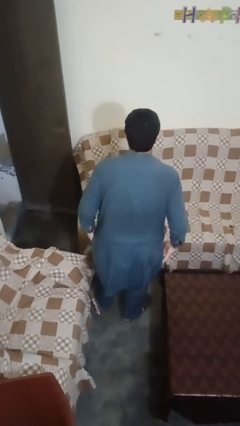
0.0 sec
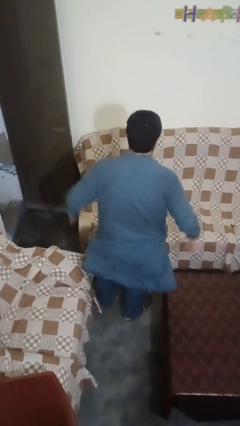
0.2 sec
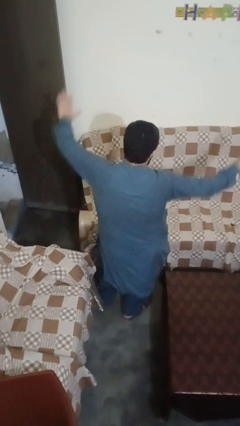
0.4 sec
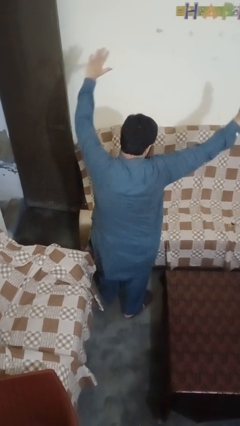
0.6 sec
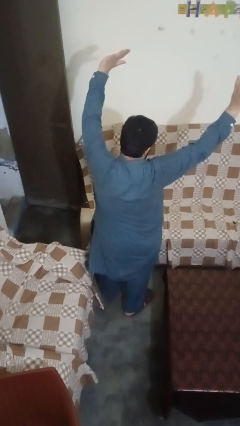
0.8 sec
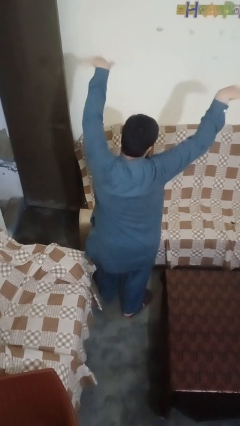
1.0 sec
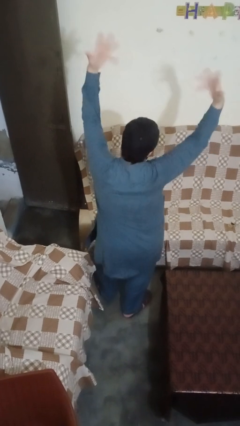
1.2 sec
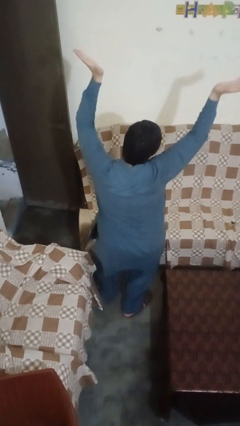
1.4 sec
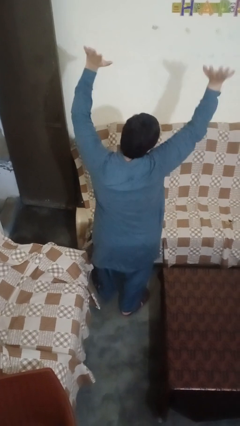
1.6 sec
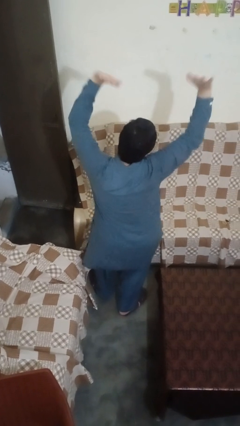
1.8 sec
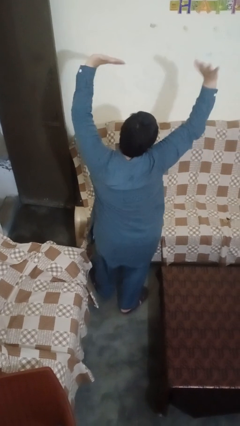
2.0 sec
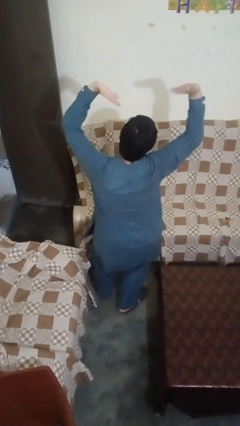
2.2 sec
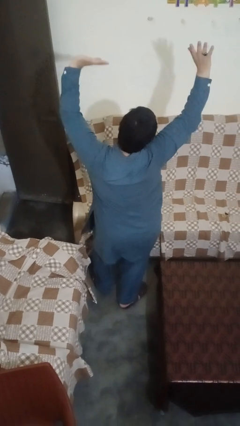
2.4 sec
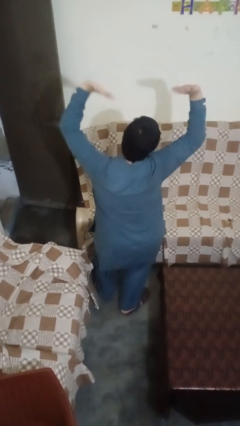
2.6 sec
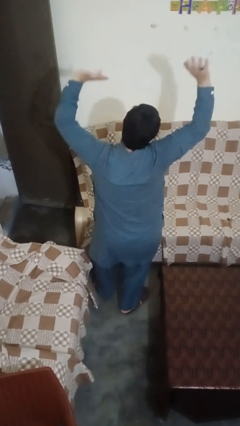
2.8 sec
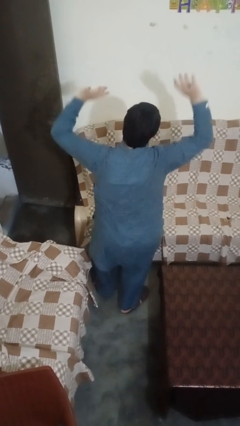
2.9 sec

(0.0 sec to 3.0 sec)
person dances in place

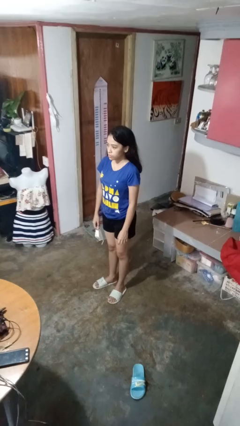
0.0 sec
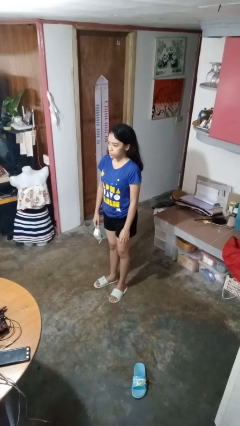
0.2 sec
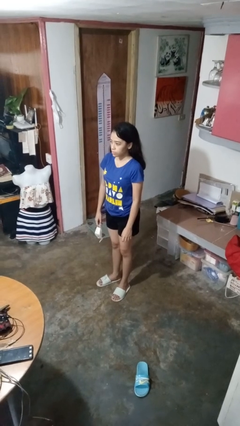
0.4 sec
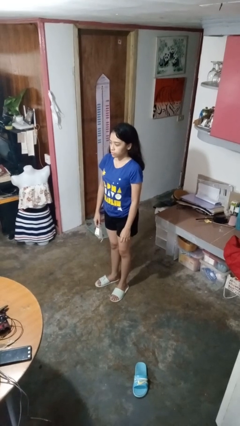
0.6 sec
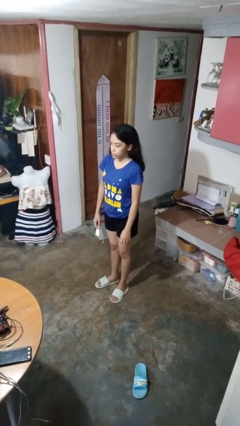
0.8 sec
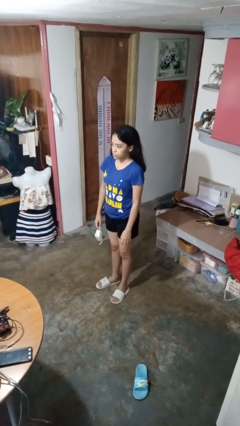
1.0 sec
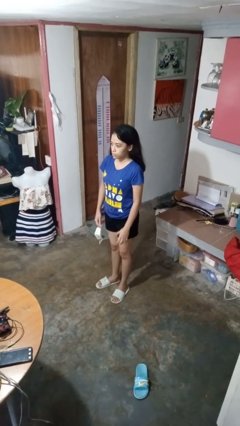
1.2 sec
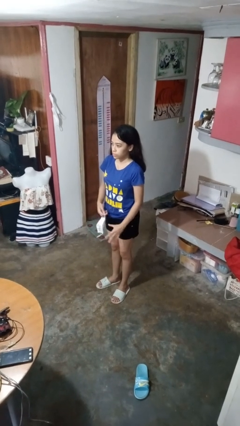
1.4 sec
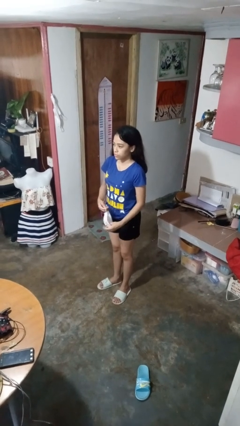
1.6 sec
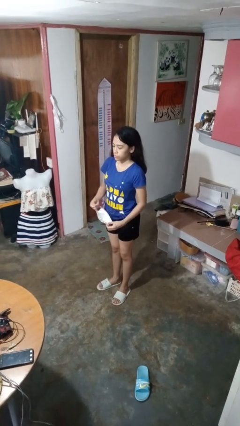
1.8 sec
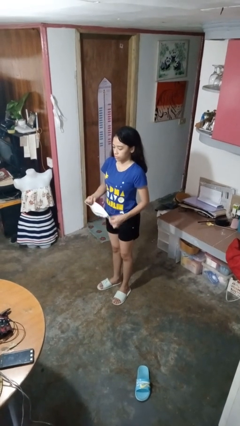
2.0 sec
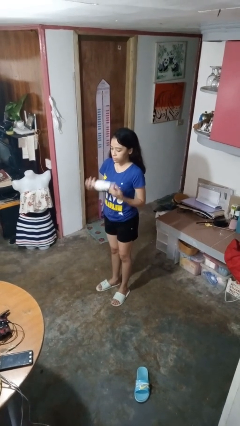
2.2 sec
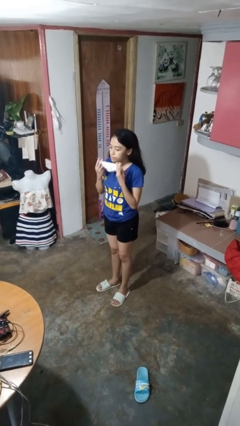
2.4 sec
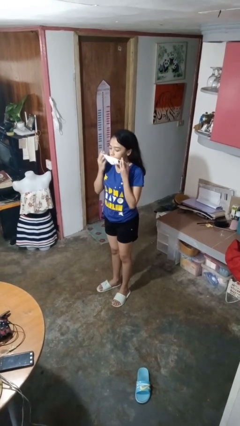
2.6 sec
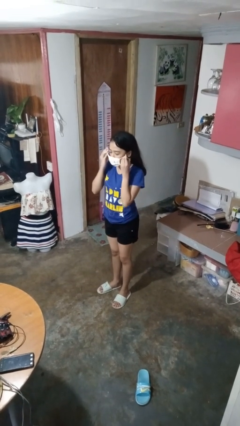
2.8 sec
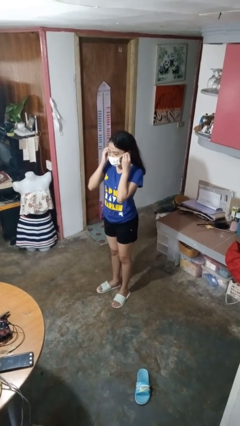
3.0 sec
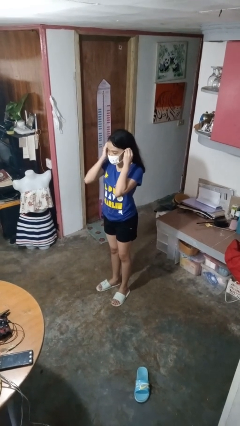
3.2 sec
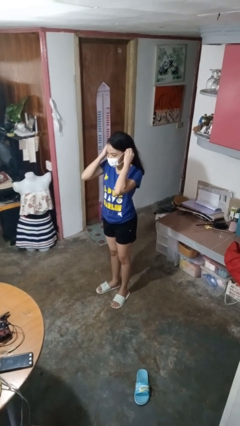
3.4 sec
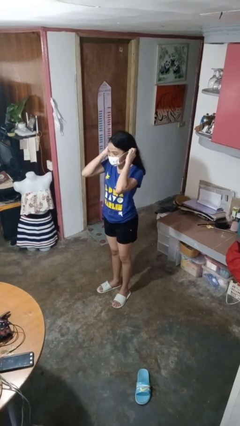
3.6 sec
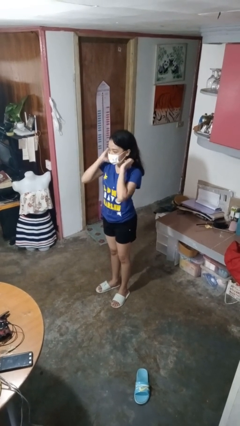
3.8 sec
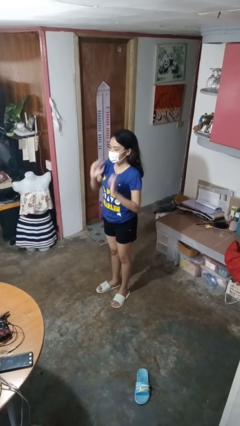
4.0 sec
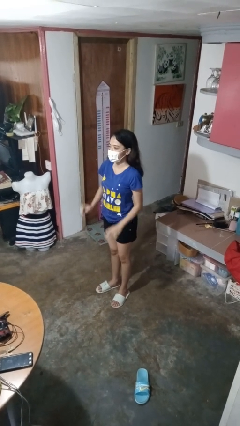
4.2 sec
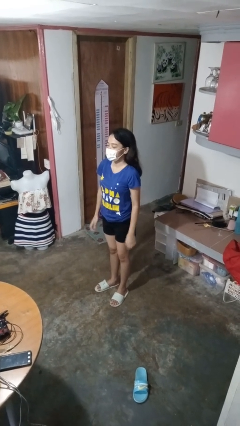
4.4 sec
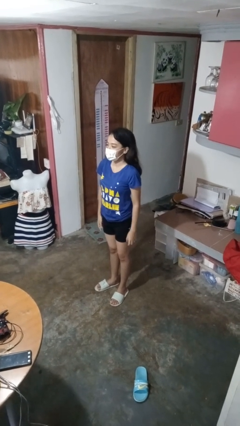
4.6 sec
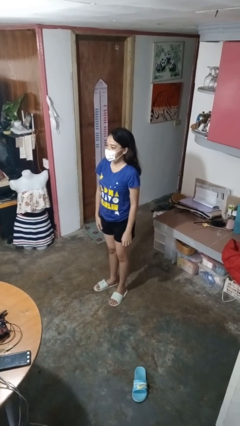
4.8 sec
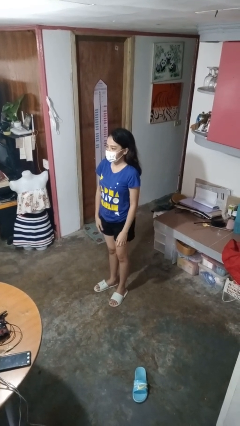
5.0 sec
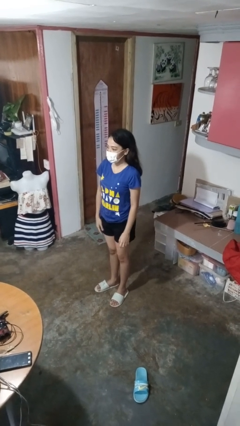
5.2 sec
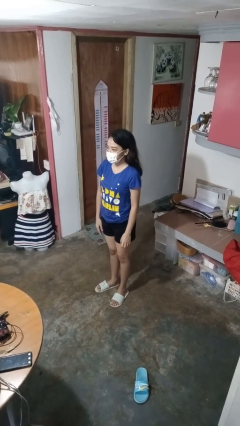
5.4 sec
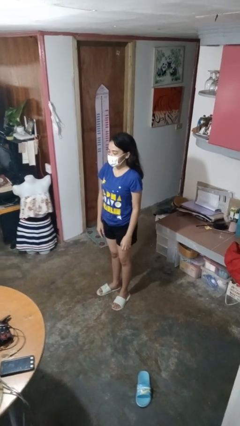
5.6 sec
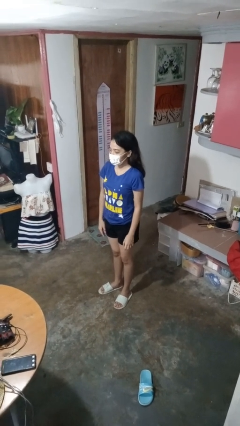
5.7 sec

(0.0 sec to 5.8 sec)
person puts on facemask

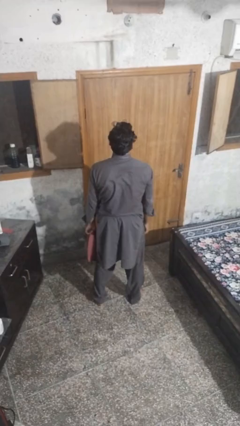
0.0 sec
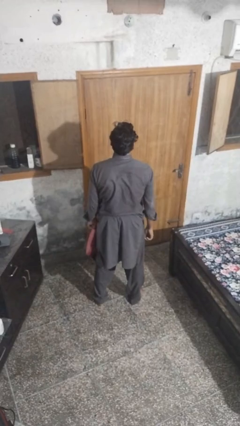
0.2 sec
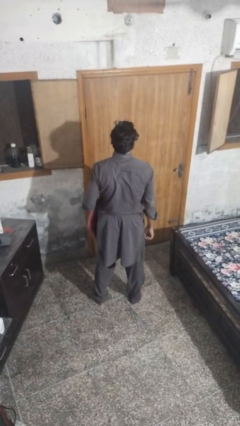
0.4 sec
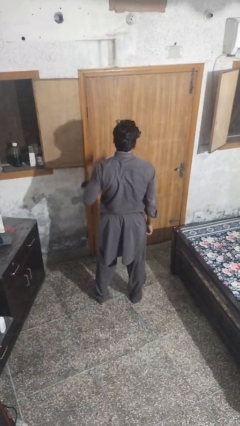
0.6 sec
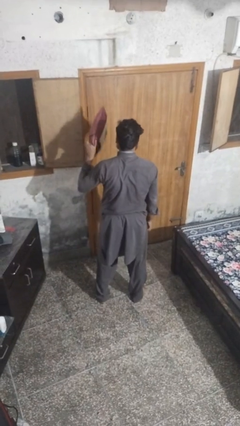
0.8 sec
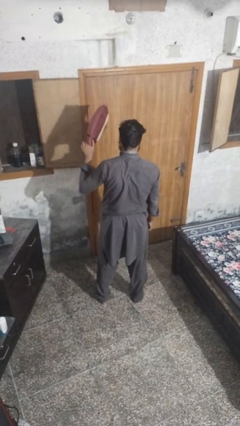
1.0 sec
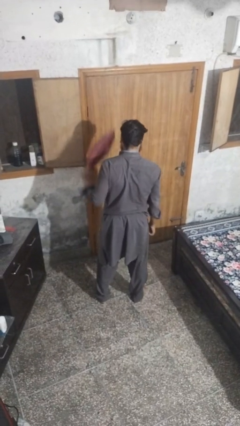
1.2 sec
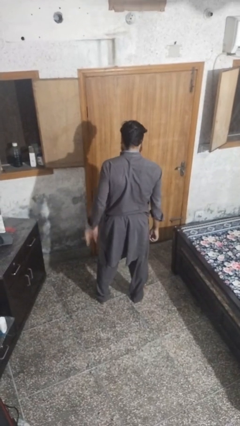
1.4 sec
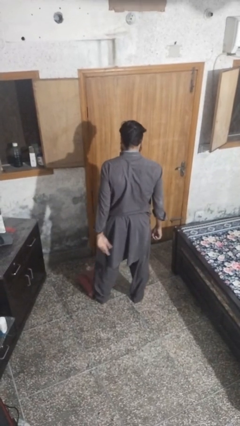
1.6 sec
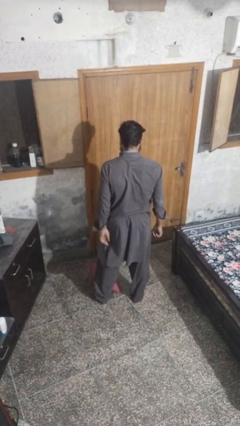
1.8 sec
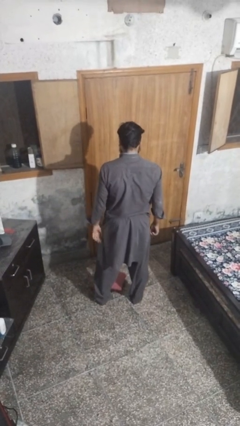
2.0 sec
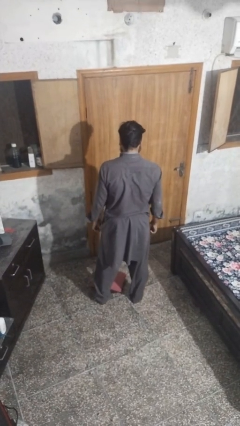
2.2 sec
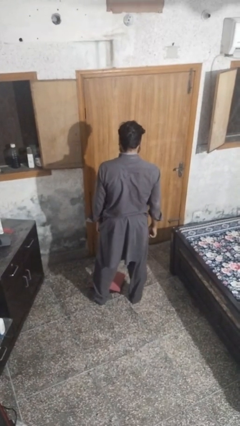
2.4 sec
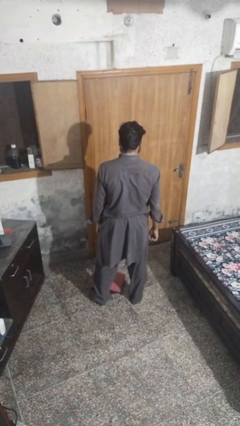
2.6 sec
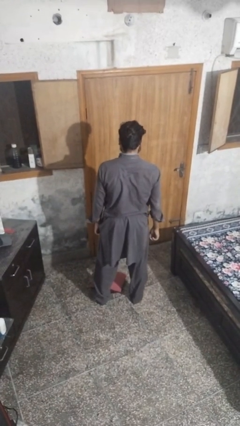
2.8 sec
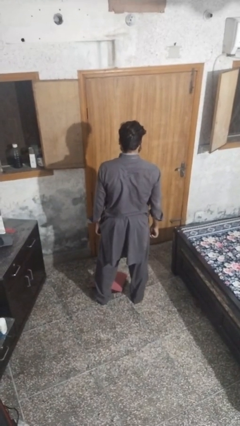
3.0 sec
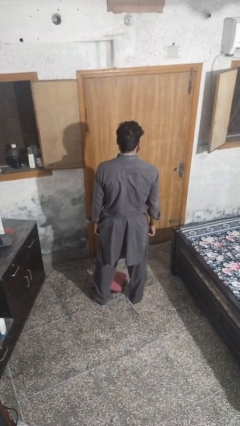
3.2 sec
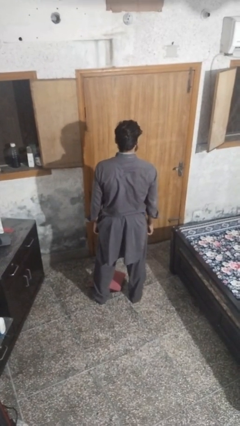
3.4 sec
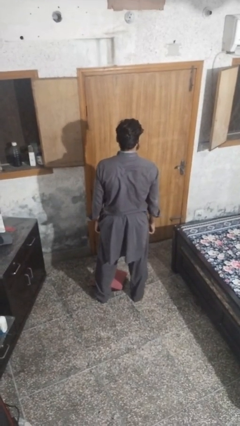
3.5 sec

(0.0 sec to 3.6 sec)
person throws object into air

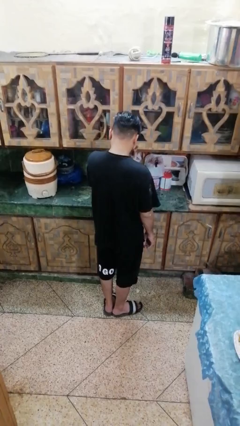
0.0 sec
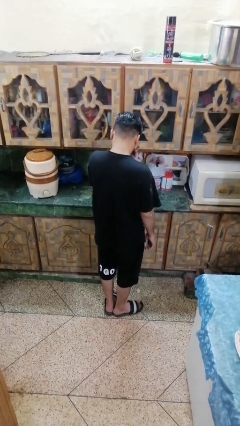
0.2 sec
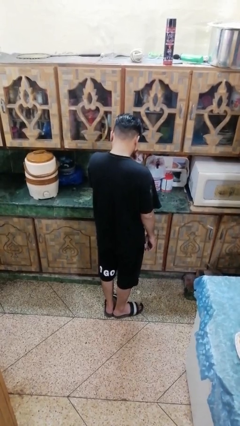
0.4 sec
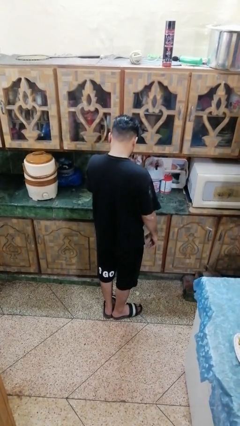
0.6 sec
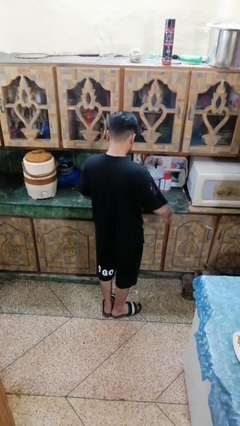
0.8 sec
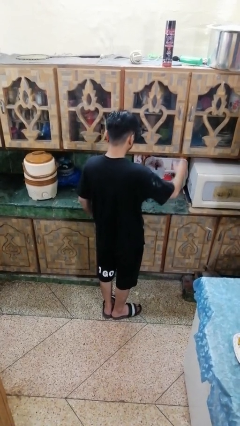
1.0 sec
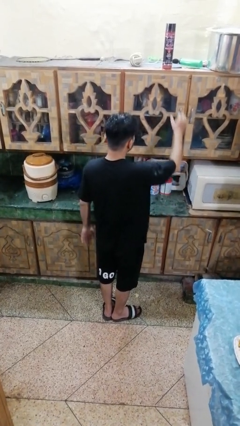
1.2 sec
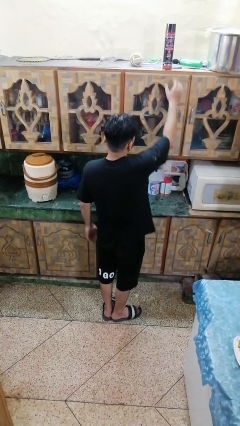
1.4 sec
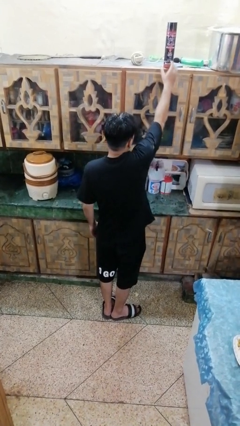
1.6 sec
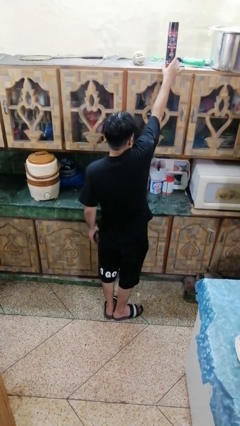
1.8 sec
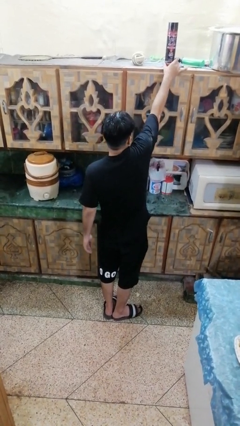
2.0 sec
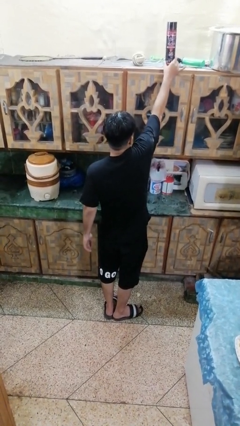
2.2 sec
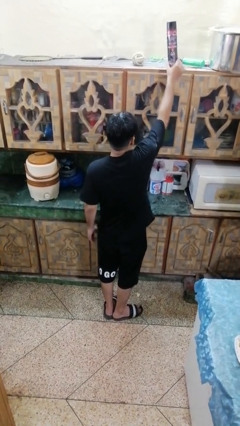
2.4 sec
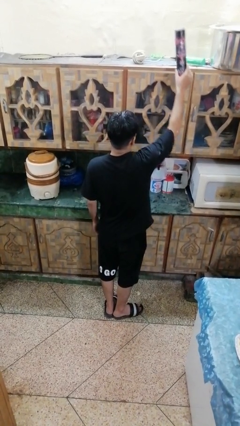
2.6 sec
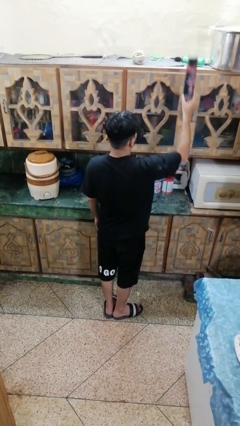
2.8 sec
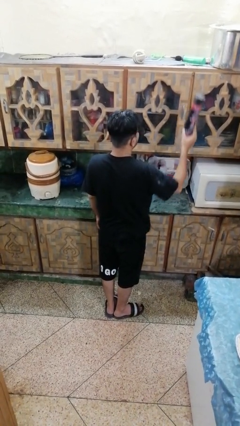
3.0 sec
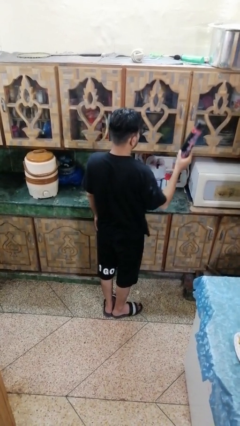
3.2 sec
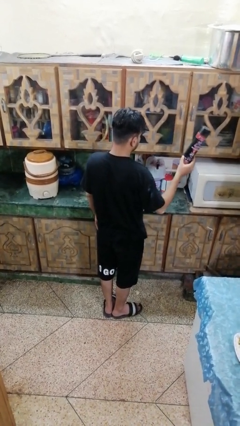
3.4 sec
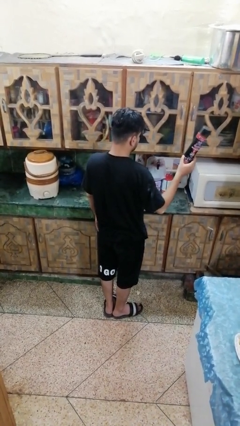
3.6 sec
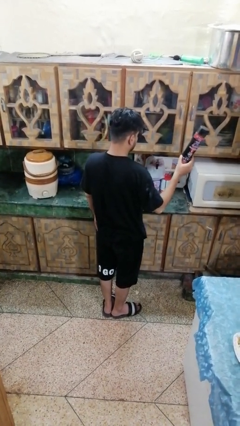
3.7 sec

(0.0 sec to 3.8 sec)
person picks up object from countertop

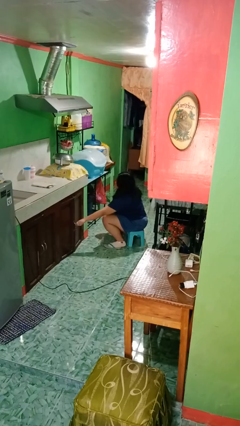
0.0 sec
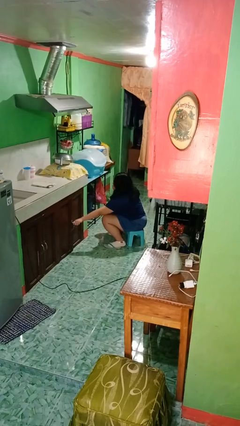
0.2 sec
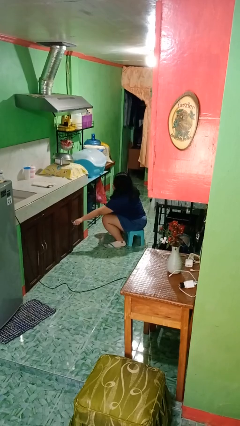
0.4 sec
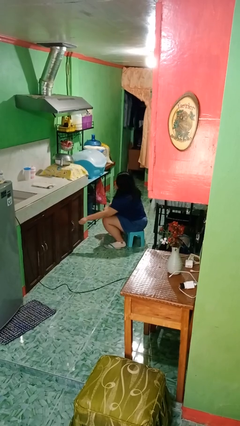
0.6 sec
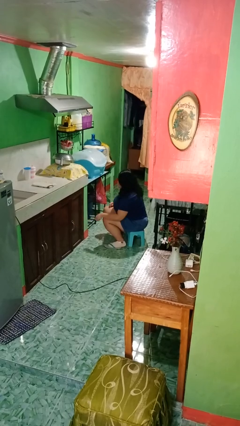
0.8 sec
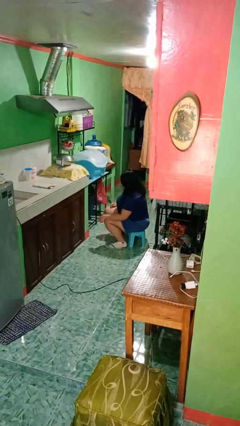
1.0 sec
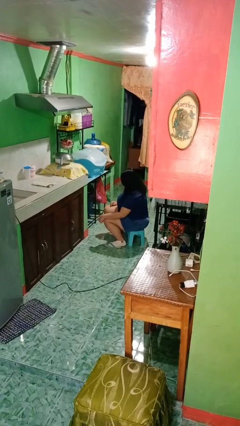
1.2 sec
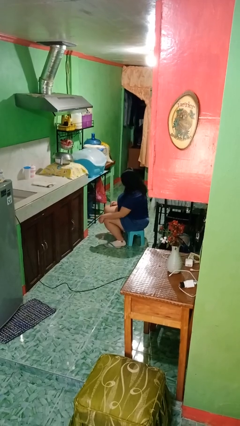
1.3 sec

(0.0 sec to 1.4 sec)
person closes cabinet
